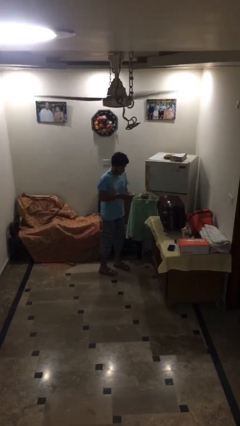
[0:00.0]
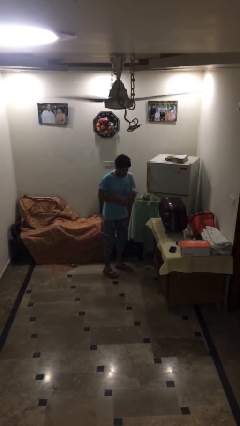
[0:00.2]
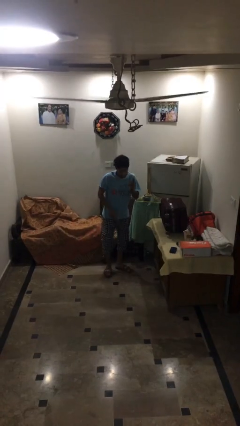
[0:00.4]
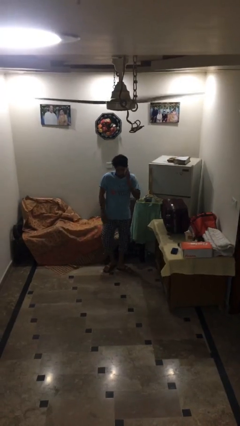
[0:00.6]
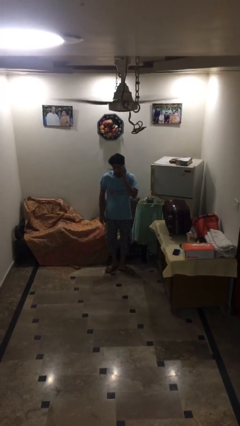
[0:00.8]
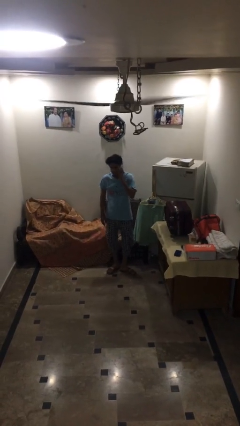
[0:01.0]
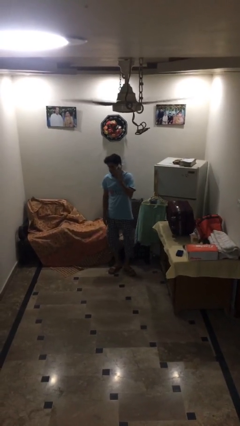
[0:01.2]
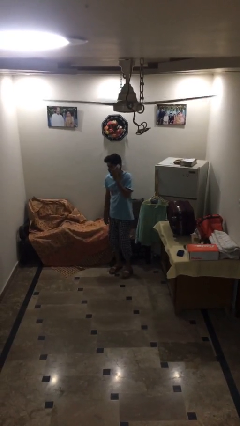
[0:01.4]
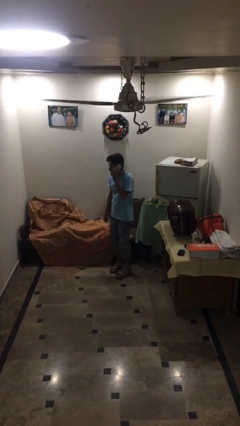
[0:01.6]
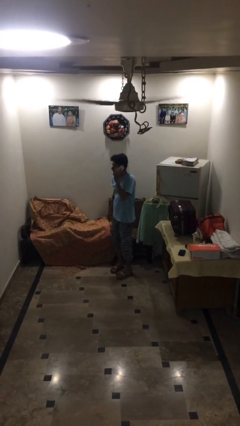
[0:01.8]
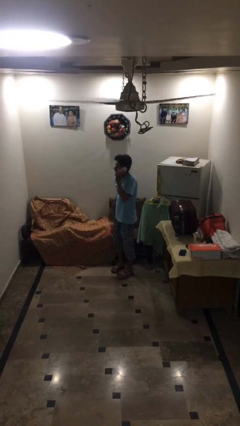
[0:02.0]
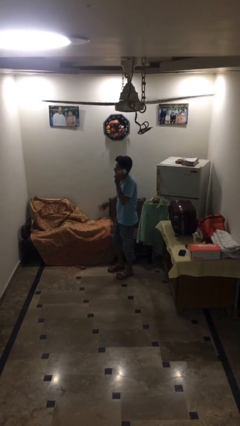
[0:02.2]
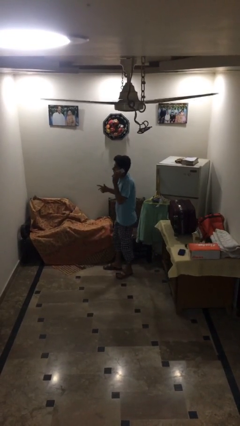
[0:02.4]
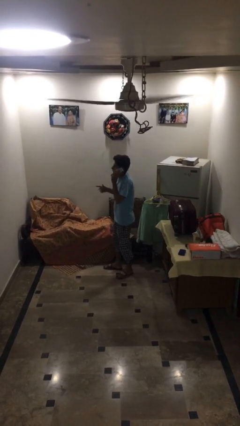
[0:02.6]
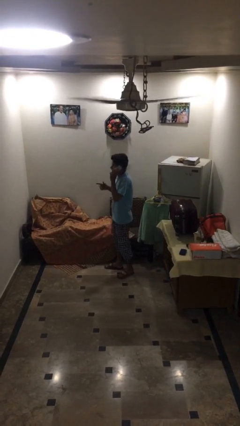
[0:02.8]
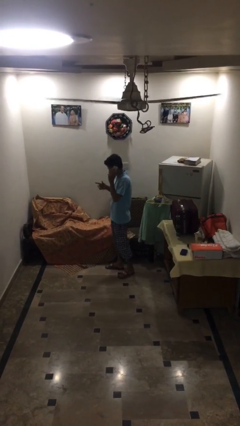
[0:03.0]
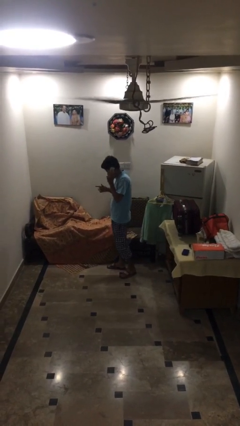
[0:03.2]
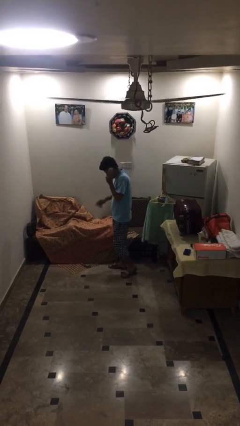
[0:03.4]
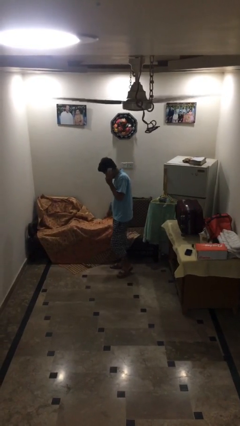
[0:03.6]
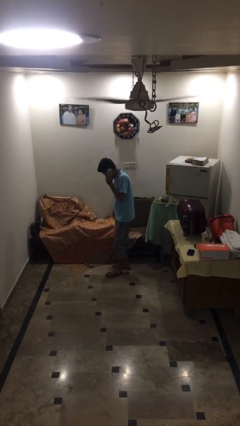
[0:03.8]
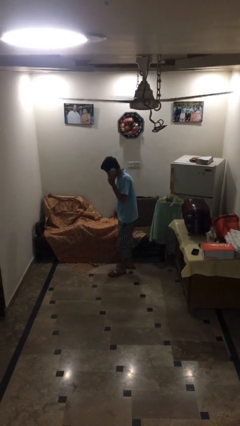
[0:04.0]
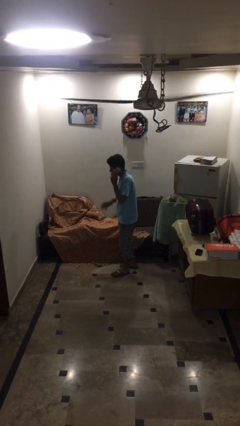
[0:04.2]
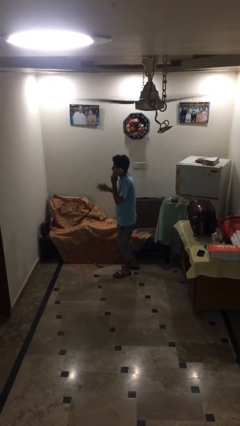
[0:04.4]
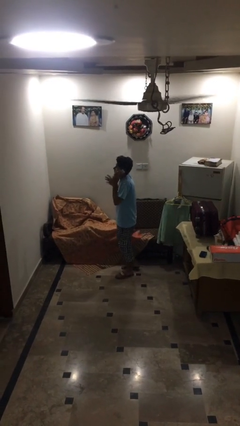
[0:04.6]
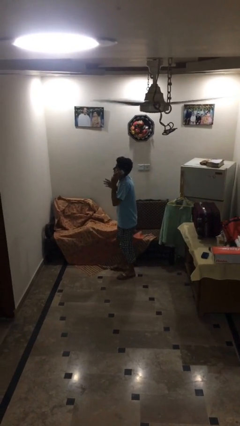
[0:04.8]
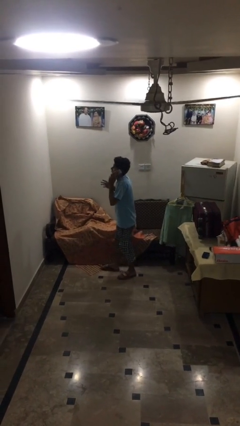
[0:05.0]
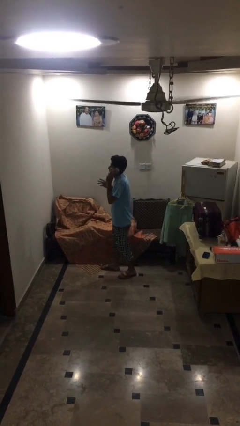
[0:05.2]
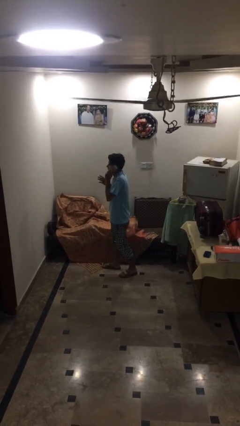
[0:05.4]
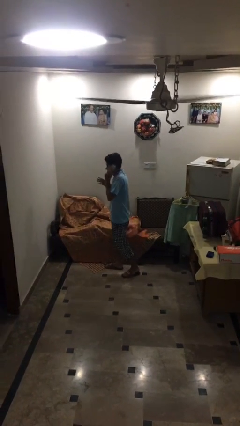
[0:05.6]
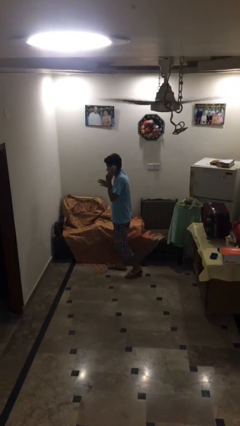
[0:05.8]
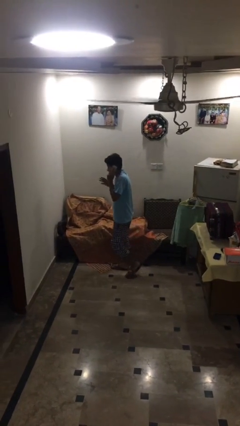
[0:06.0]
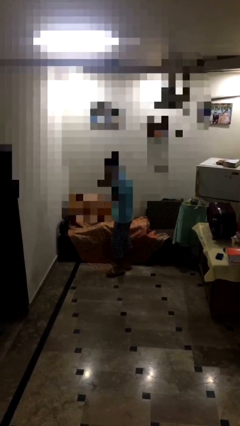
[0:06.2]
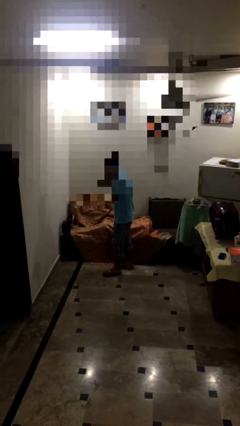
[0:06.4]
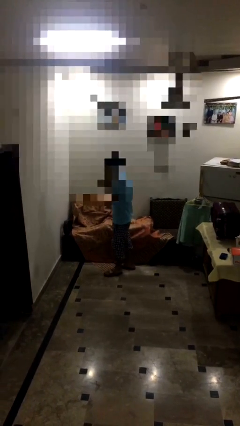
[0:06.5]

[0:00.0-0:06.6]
person talks on phone

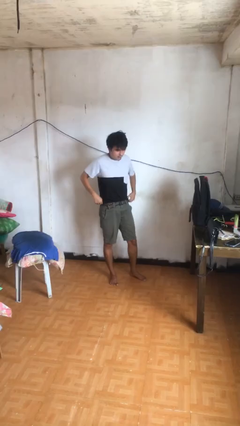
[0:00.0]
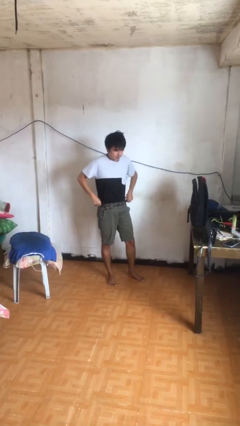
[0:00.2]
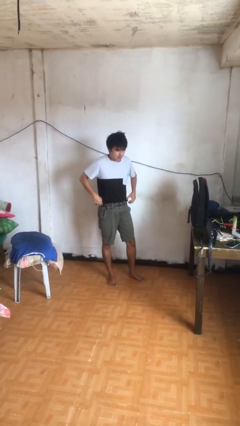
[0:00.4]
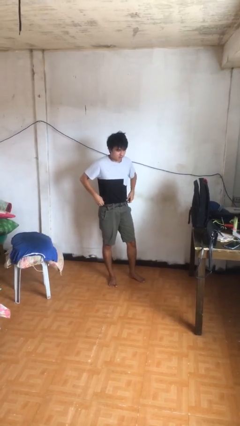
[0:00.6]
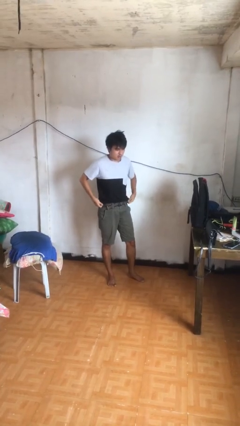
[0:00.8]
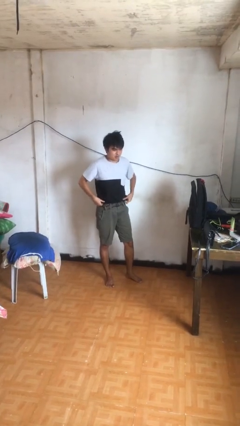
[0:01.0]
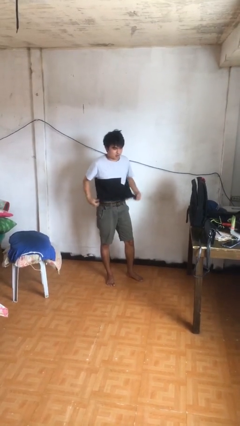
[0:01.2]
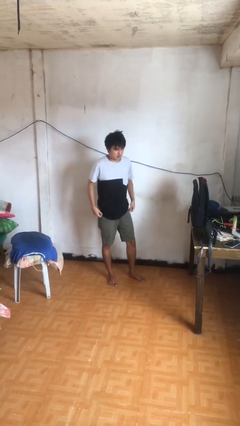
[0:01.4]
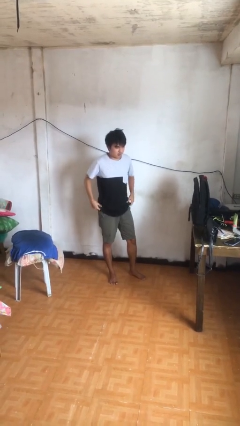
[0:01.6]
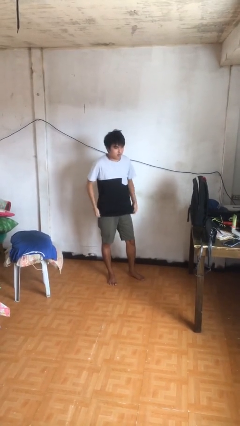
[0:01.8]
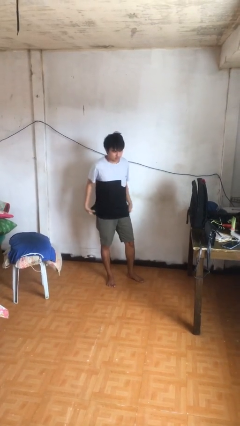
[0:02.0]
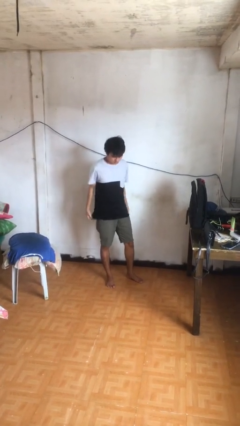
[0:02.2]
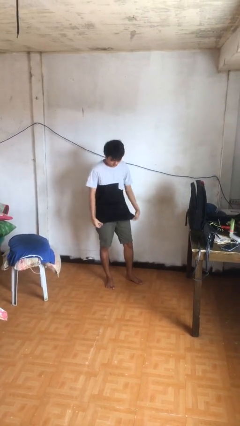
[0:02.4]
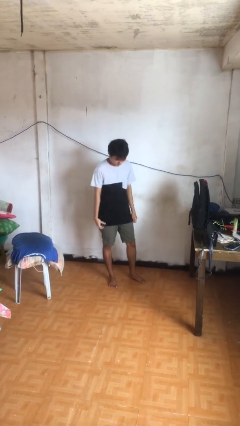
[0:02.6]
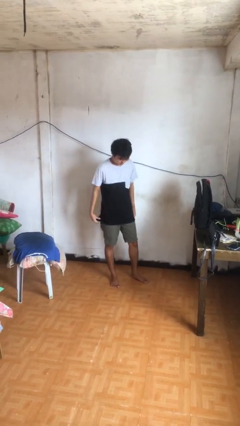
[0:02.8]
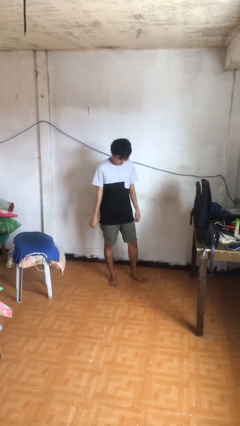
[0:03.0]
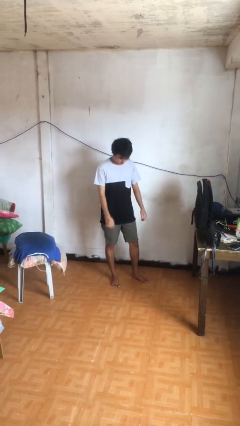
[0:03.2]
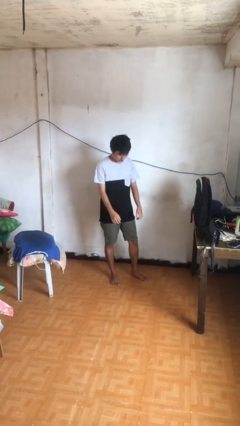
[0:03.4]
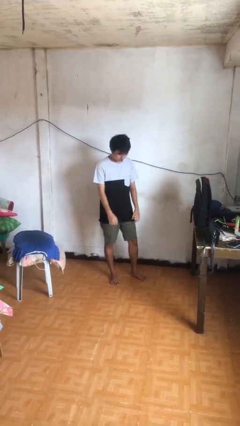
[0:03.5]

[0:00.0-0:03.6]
person untucks shirt

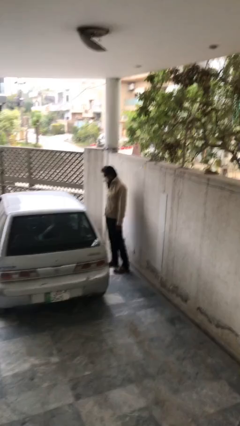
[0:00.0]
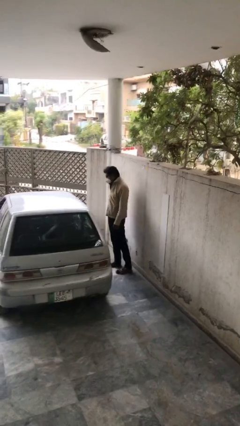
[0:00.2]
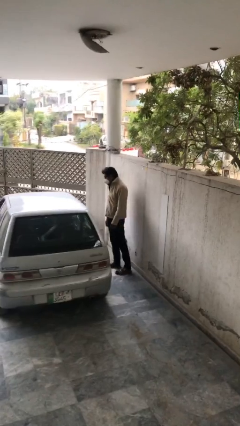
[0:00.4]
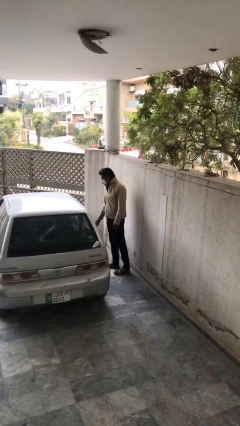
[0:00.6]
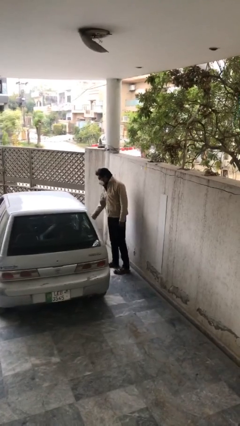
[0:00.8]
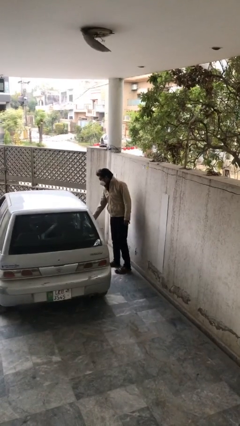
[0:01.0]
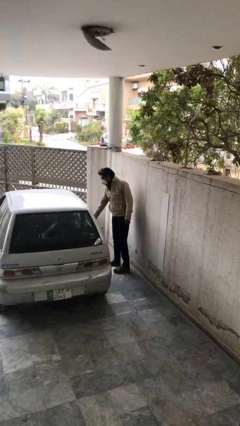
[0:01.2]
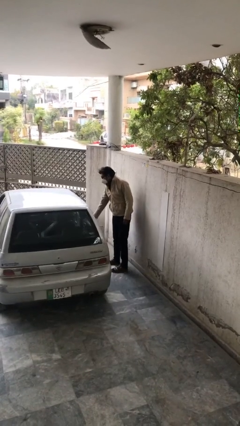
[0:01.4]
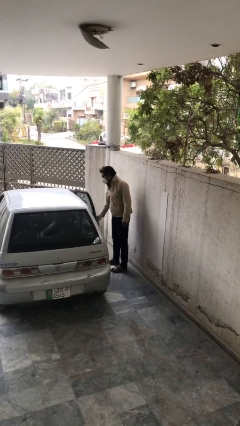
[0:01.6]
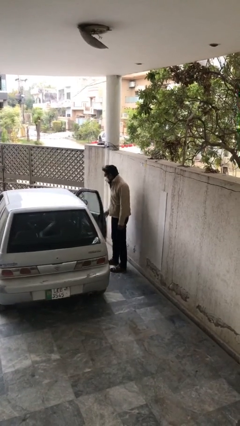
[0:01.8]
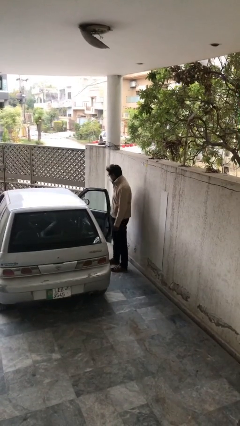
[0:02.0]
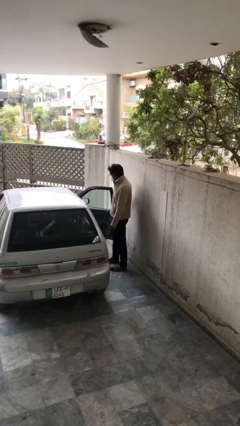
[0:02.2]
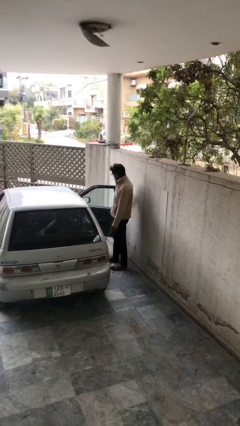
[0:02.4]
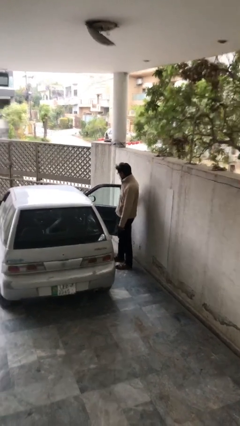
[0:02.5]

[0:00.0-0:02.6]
person opens car door

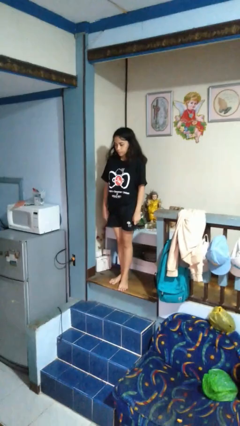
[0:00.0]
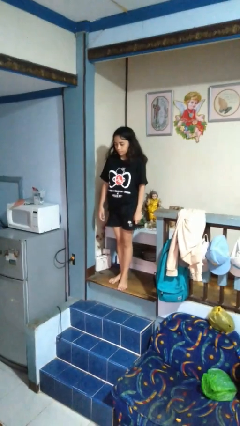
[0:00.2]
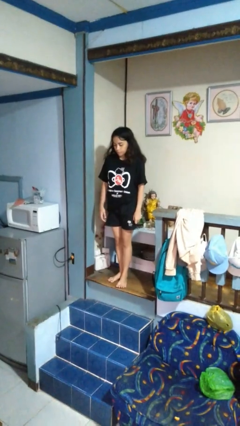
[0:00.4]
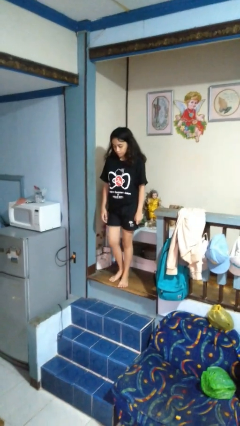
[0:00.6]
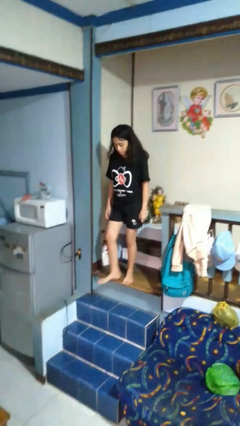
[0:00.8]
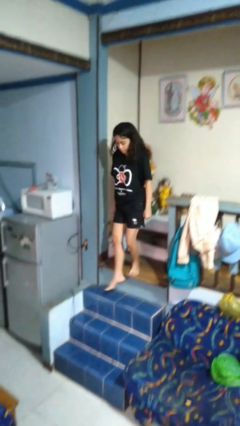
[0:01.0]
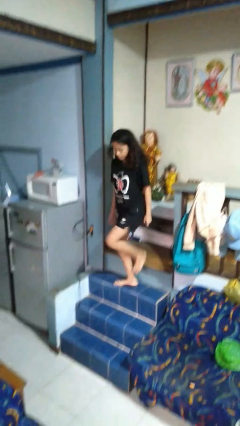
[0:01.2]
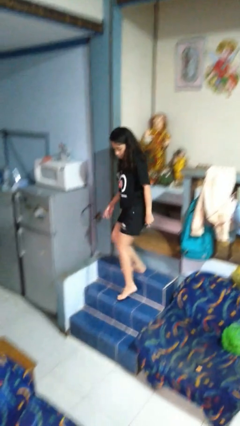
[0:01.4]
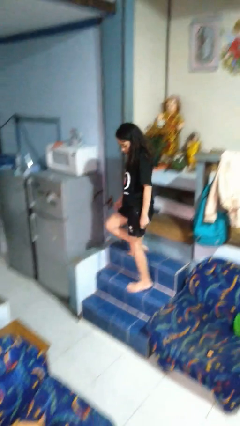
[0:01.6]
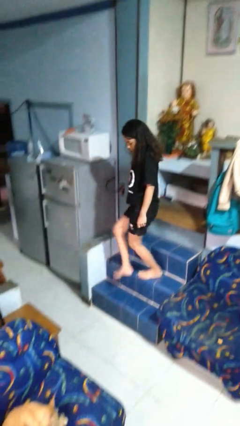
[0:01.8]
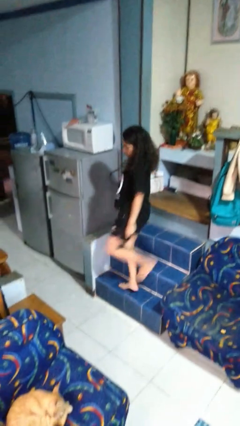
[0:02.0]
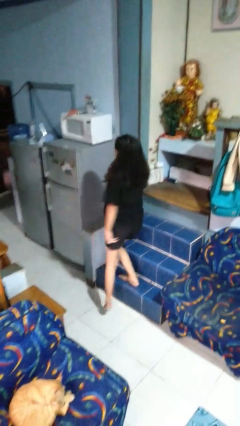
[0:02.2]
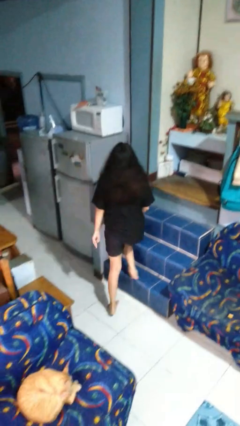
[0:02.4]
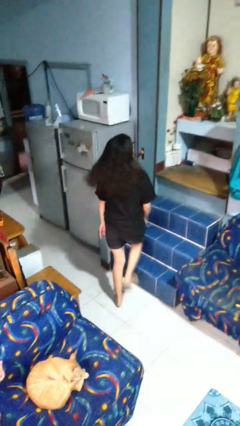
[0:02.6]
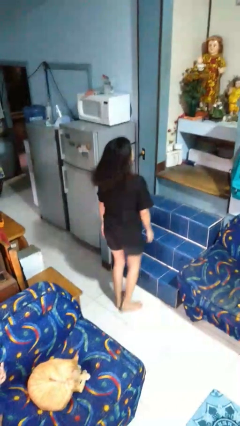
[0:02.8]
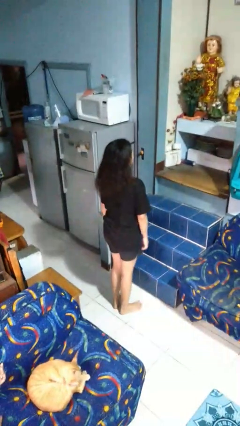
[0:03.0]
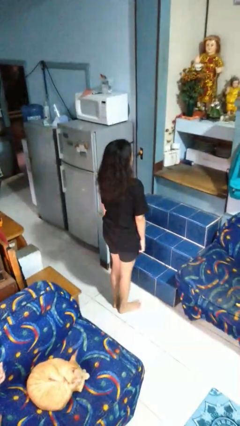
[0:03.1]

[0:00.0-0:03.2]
person climbs down stairs

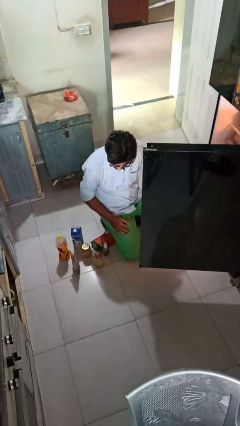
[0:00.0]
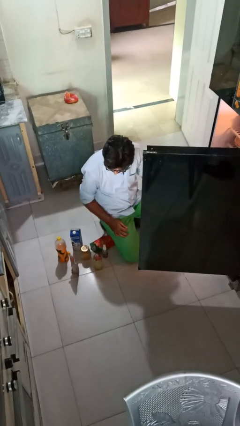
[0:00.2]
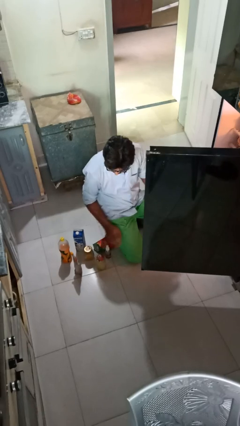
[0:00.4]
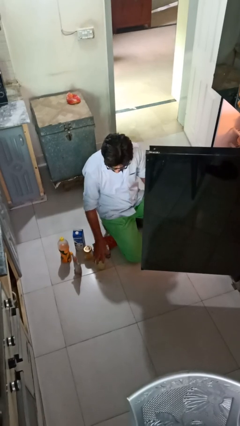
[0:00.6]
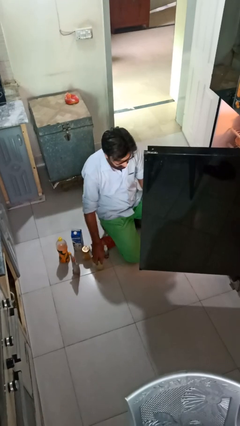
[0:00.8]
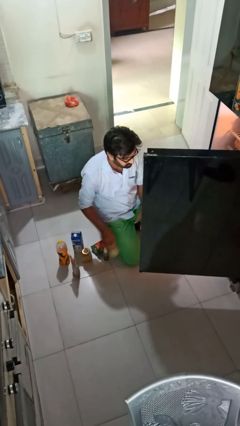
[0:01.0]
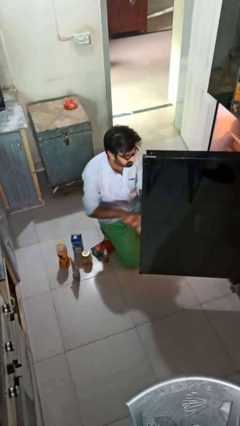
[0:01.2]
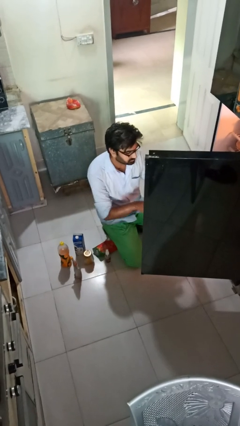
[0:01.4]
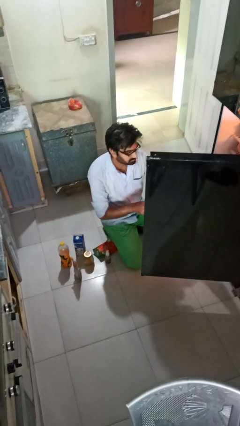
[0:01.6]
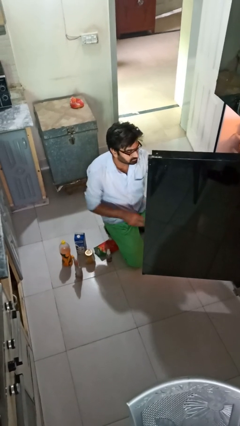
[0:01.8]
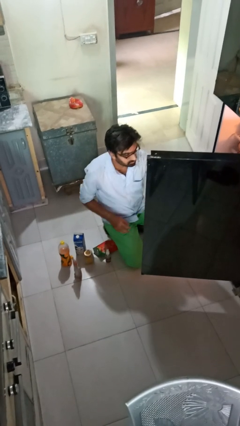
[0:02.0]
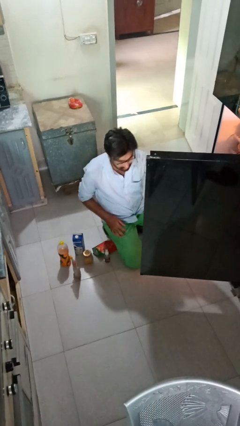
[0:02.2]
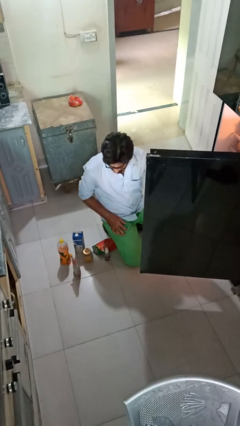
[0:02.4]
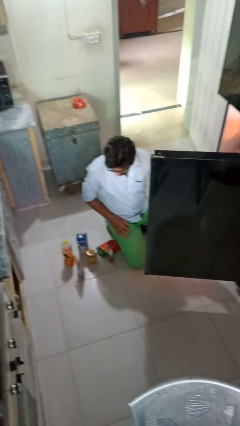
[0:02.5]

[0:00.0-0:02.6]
person loads groceries into refrigerator
